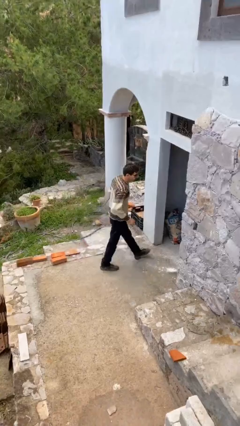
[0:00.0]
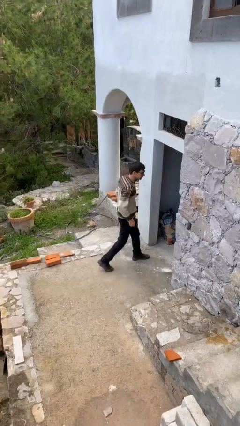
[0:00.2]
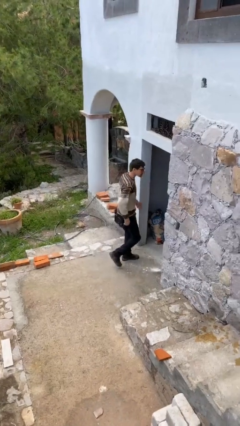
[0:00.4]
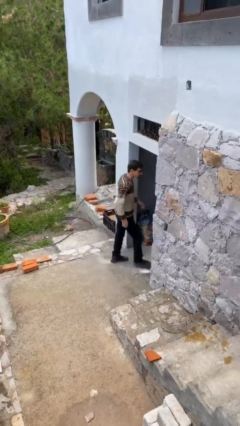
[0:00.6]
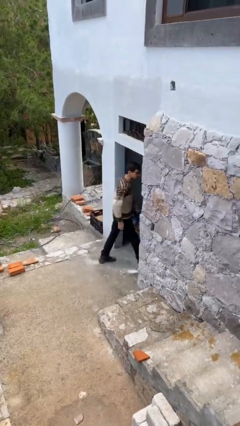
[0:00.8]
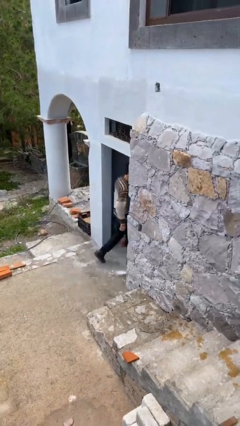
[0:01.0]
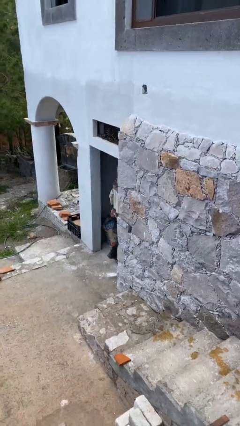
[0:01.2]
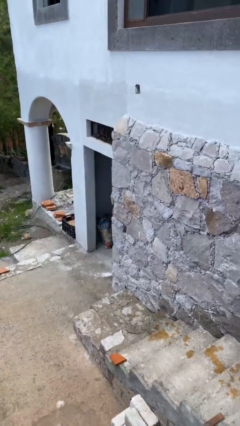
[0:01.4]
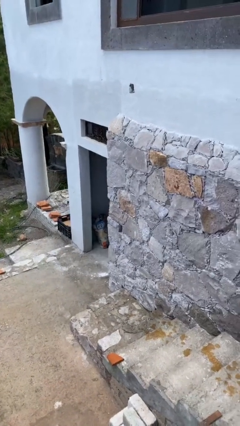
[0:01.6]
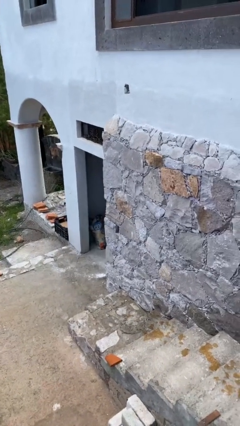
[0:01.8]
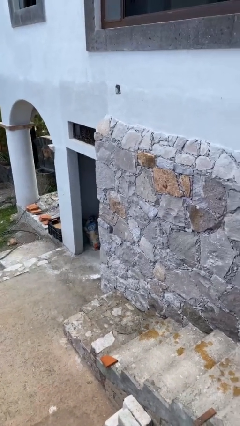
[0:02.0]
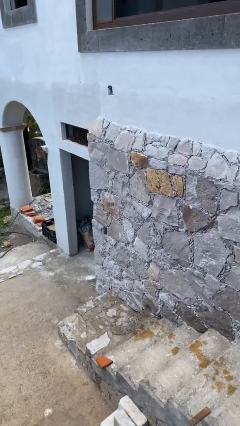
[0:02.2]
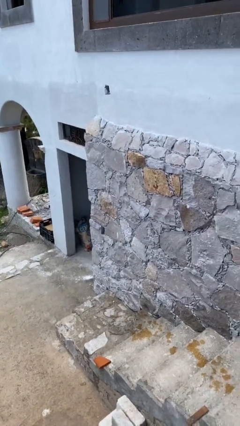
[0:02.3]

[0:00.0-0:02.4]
person exits scene through structure

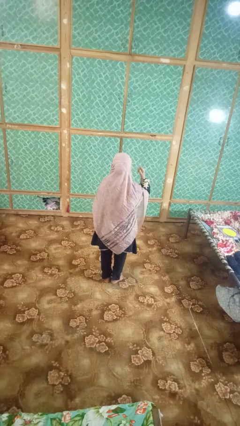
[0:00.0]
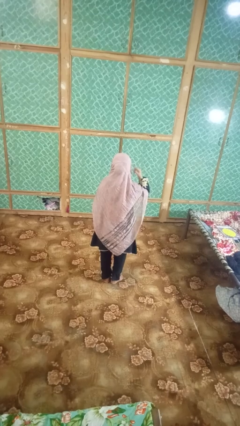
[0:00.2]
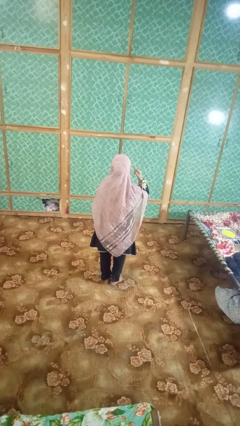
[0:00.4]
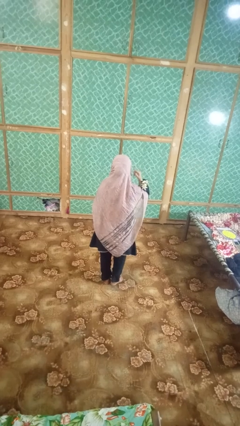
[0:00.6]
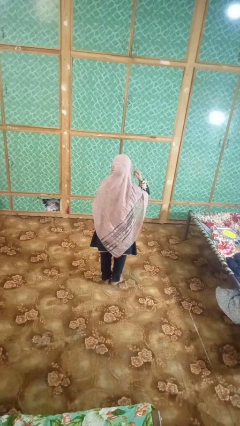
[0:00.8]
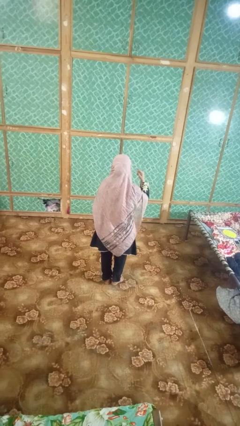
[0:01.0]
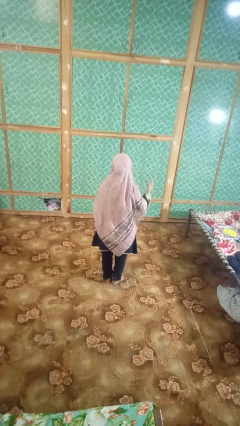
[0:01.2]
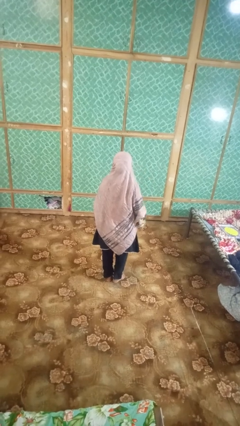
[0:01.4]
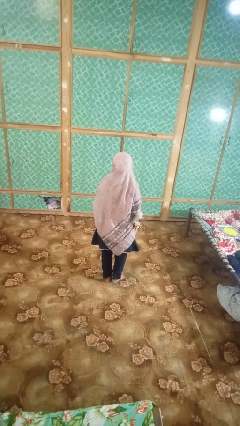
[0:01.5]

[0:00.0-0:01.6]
person gestures listen closely

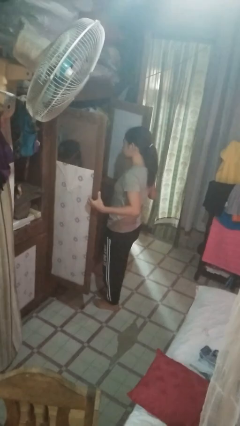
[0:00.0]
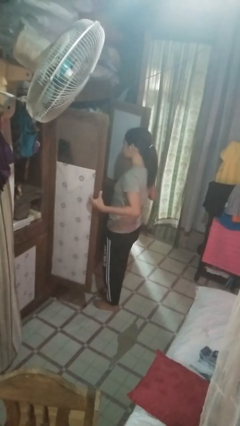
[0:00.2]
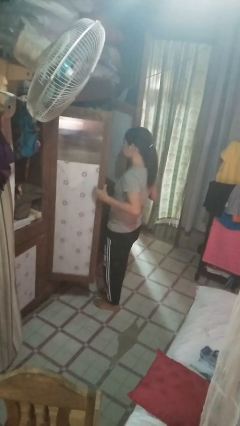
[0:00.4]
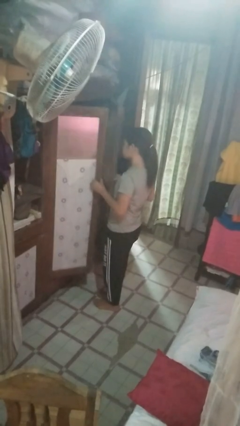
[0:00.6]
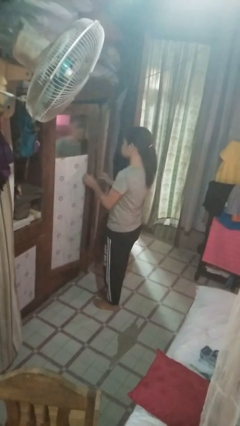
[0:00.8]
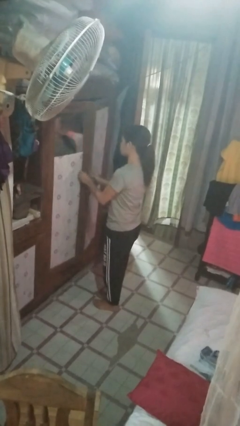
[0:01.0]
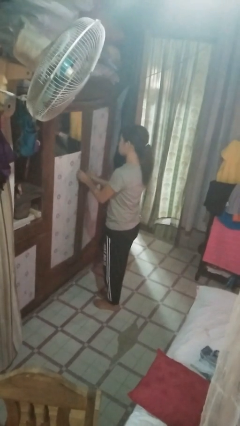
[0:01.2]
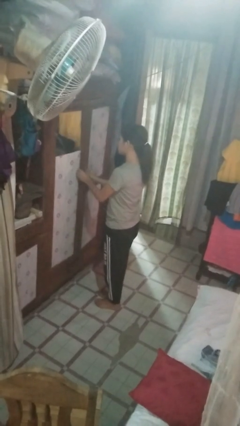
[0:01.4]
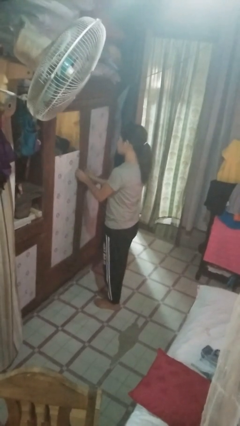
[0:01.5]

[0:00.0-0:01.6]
person closes closet door

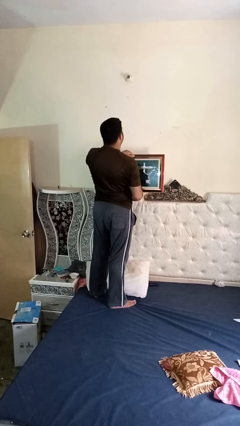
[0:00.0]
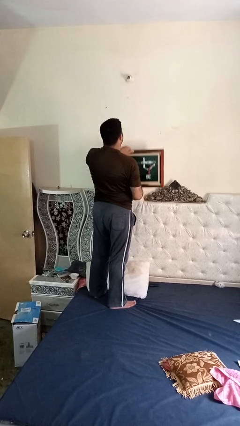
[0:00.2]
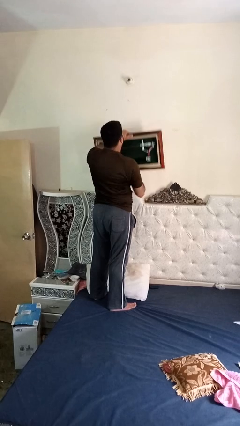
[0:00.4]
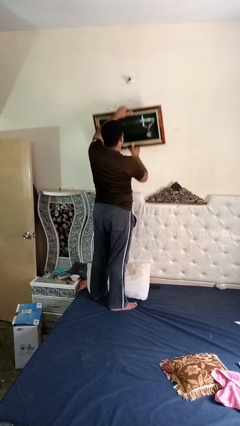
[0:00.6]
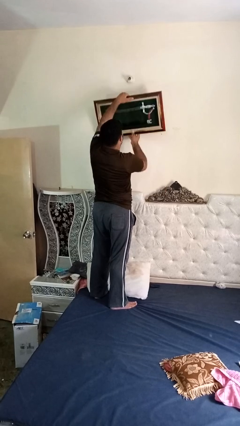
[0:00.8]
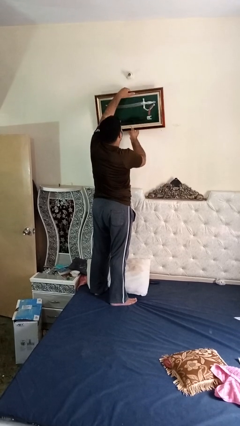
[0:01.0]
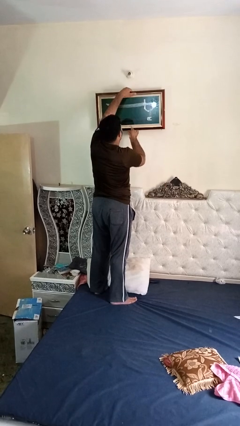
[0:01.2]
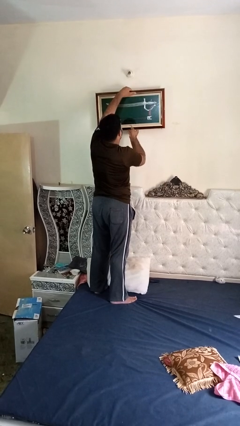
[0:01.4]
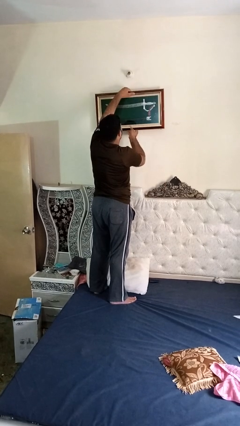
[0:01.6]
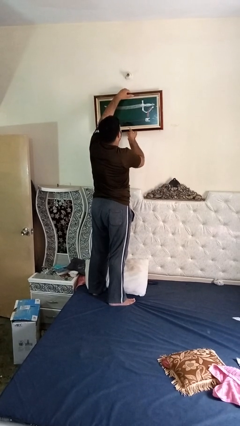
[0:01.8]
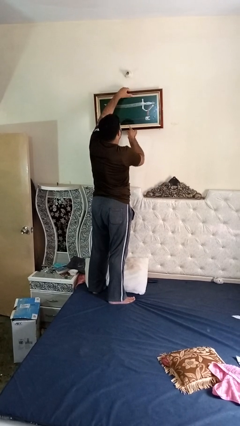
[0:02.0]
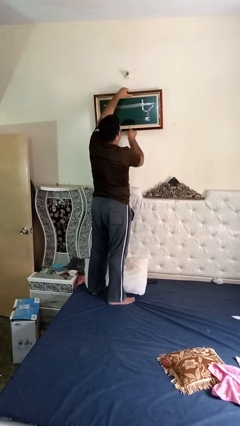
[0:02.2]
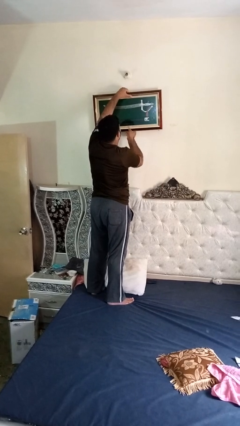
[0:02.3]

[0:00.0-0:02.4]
person puts up picture frame

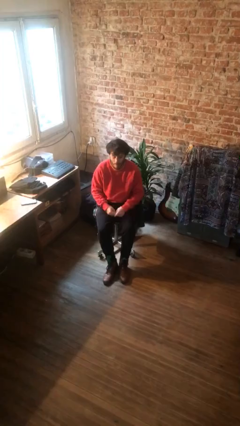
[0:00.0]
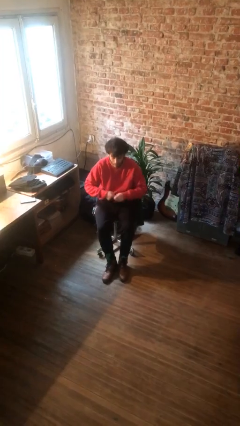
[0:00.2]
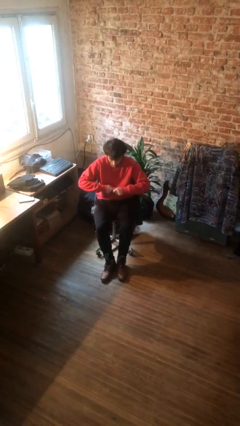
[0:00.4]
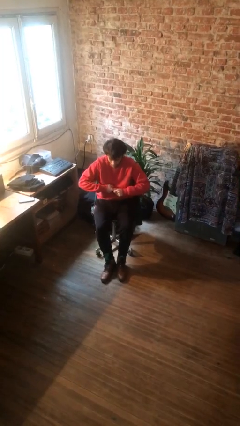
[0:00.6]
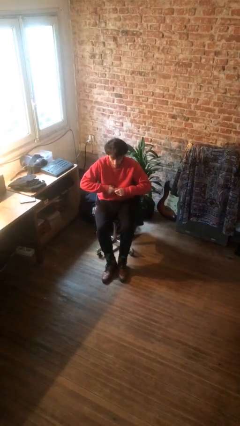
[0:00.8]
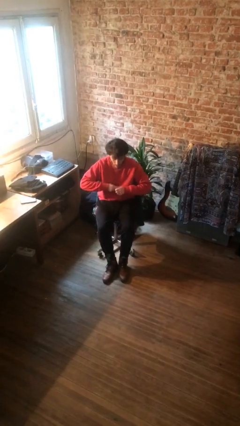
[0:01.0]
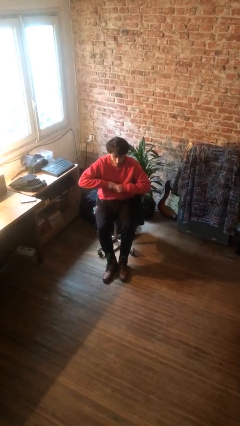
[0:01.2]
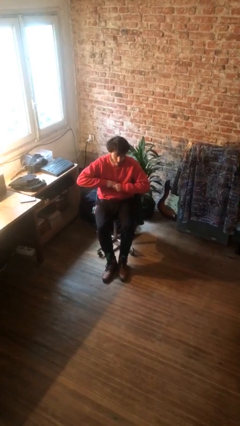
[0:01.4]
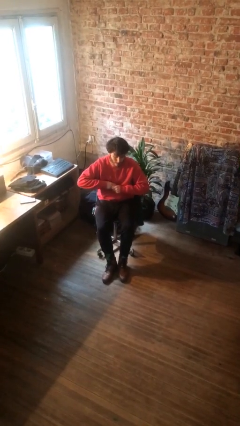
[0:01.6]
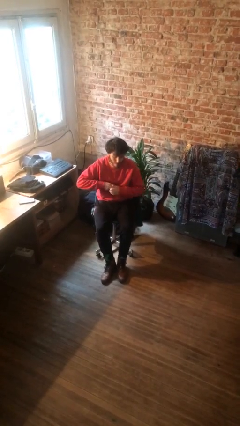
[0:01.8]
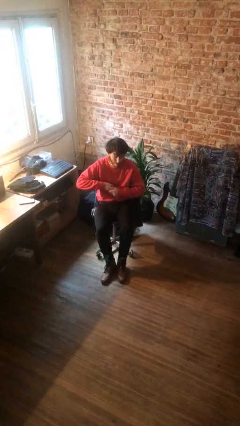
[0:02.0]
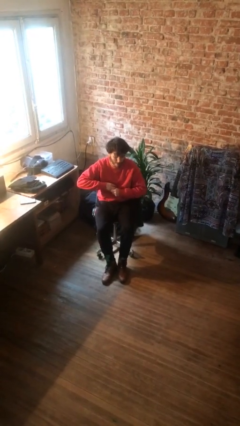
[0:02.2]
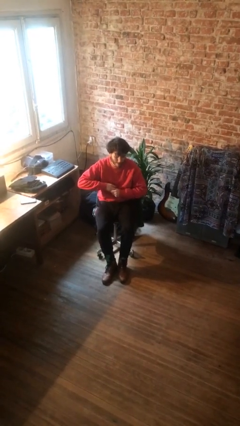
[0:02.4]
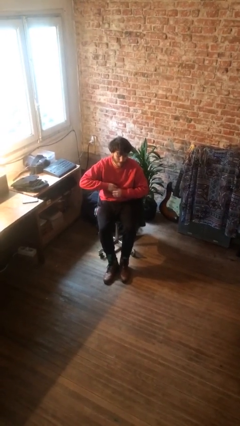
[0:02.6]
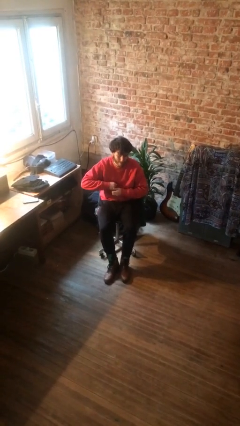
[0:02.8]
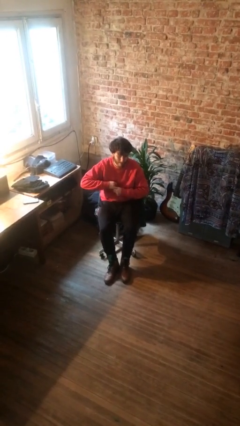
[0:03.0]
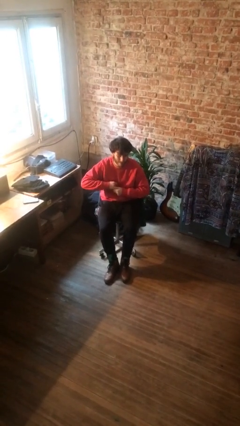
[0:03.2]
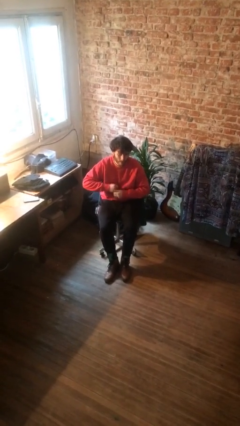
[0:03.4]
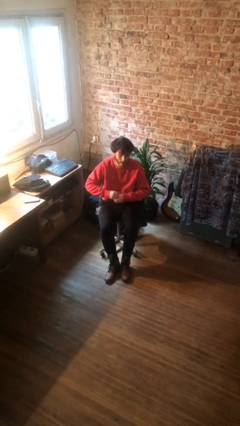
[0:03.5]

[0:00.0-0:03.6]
person cracks knuckles

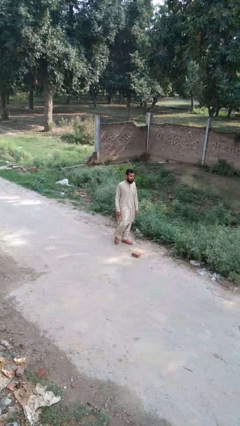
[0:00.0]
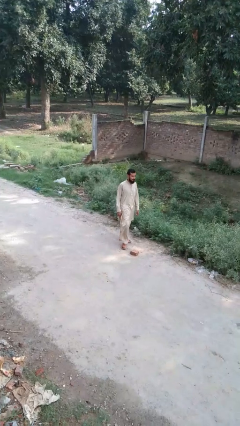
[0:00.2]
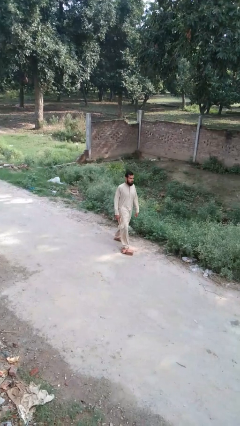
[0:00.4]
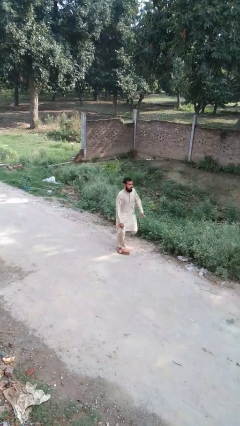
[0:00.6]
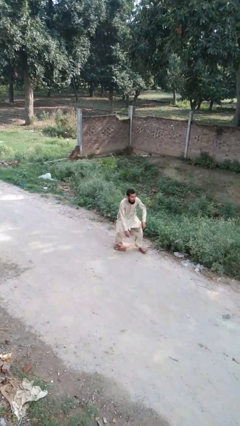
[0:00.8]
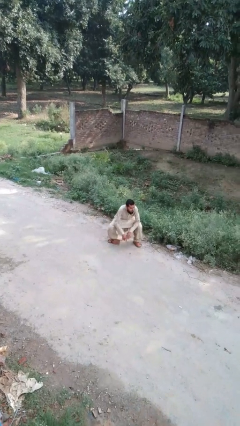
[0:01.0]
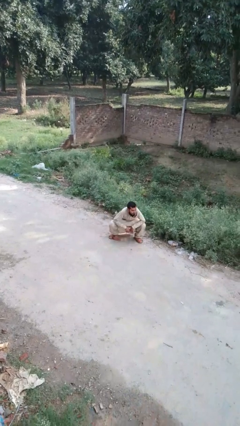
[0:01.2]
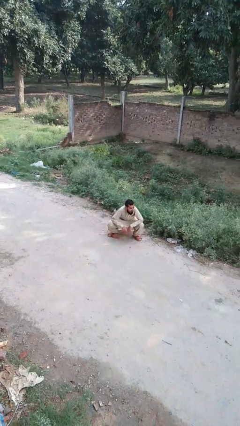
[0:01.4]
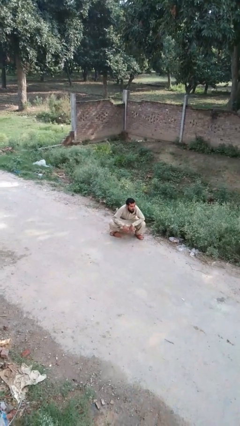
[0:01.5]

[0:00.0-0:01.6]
person trips on object on floor

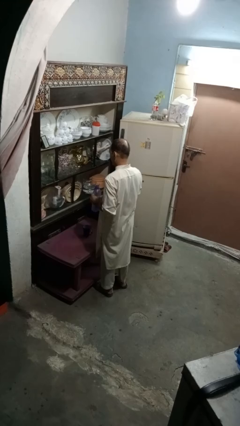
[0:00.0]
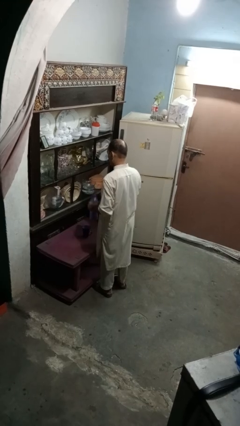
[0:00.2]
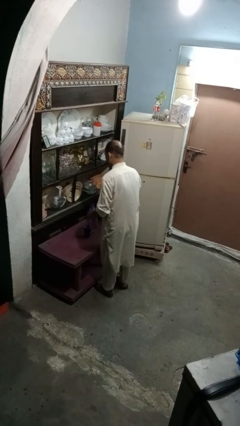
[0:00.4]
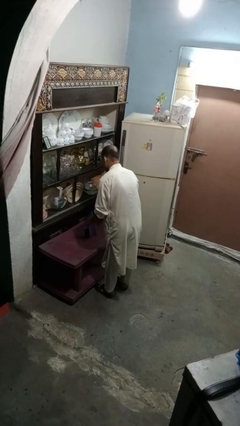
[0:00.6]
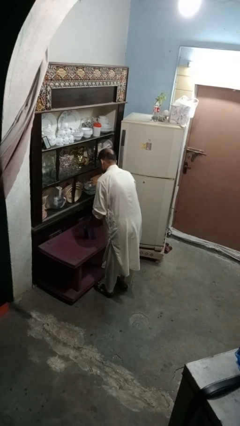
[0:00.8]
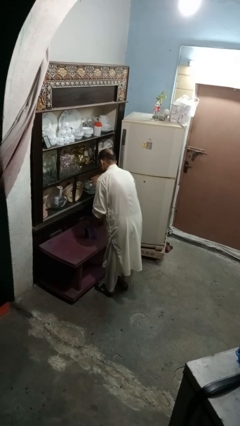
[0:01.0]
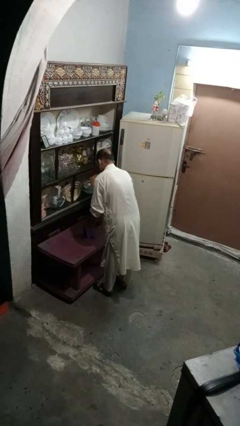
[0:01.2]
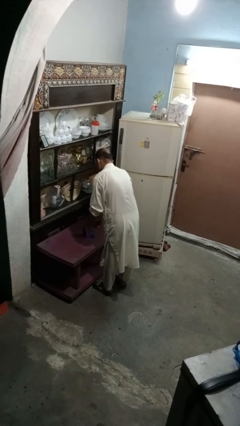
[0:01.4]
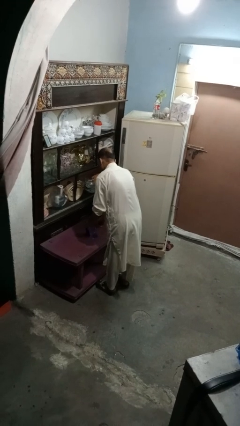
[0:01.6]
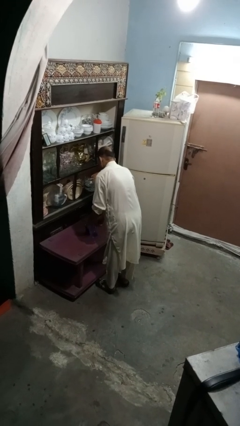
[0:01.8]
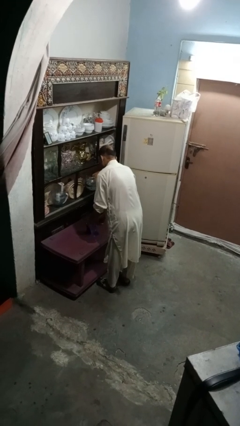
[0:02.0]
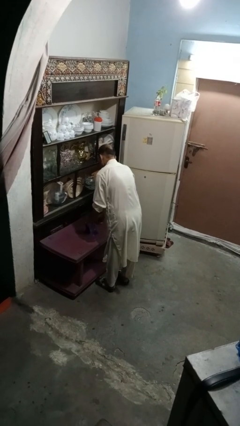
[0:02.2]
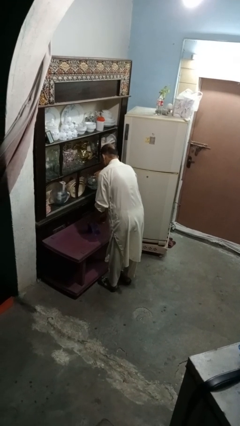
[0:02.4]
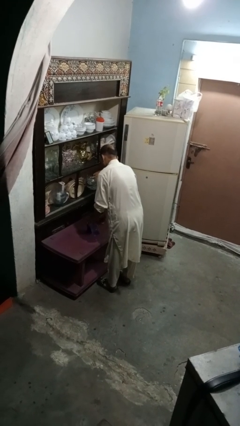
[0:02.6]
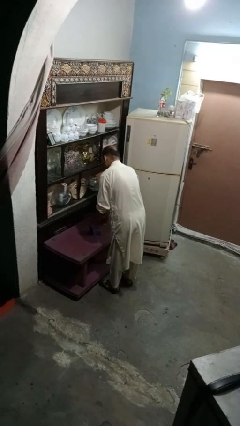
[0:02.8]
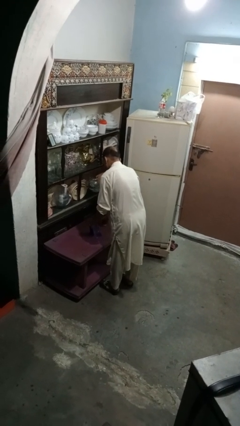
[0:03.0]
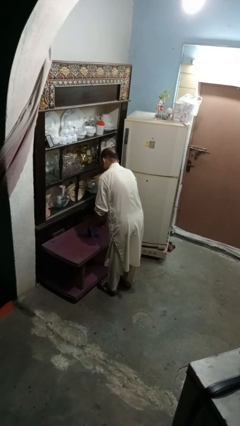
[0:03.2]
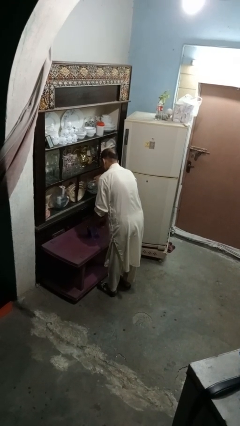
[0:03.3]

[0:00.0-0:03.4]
person pours liquid into cup

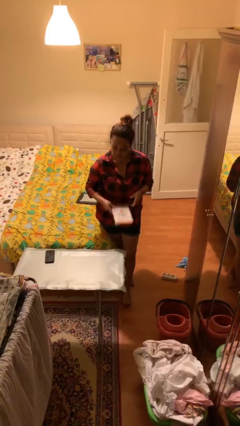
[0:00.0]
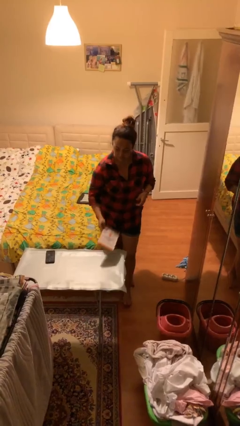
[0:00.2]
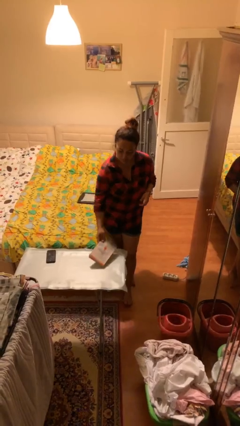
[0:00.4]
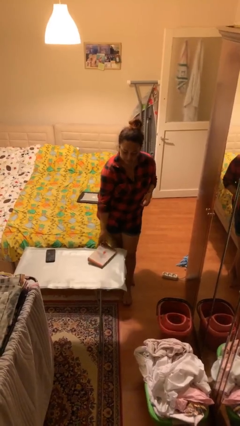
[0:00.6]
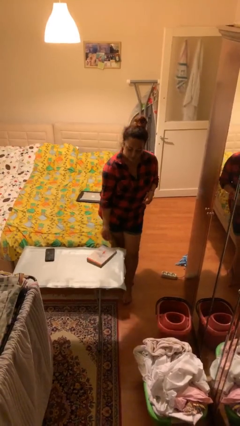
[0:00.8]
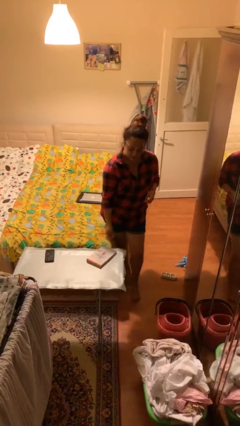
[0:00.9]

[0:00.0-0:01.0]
person puts down object on table
